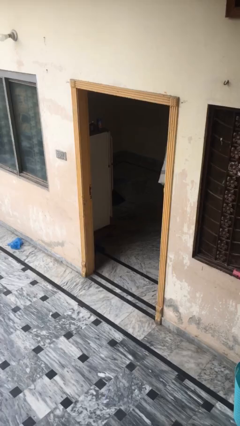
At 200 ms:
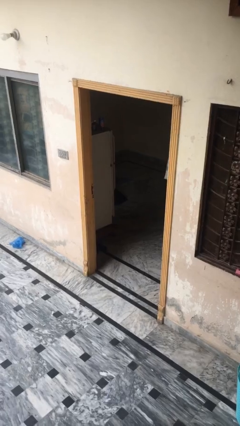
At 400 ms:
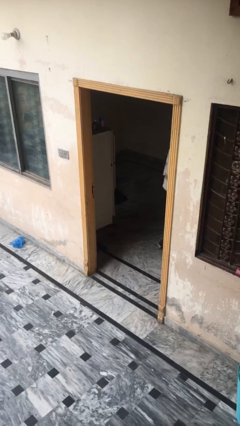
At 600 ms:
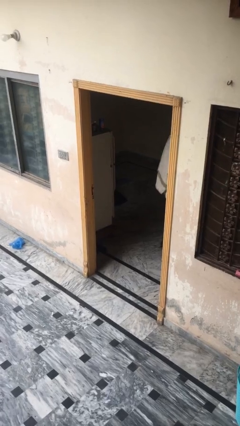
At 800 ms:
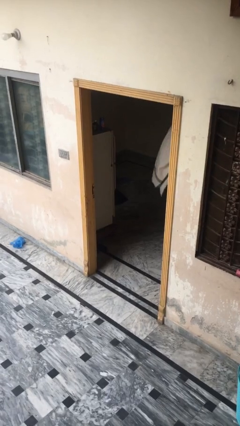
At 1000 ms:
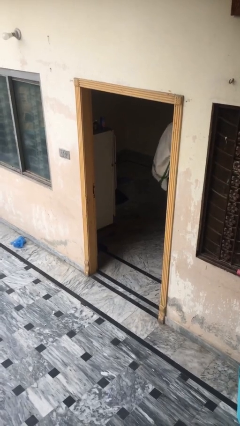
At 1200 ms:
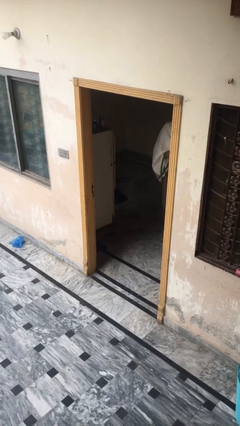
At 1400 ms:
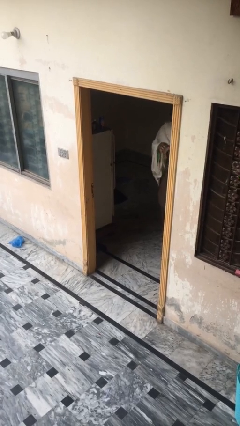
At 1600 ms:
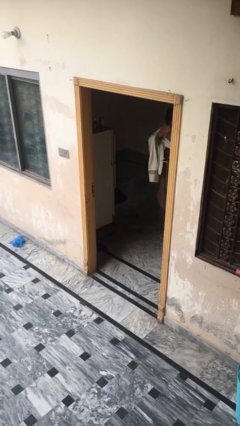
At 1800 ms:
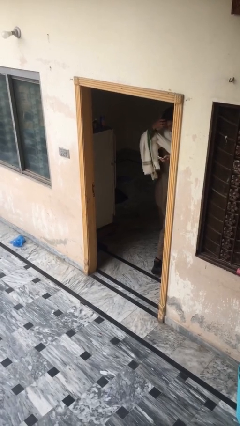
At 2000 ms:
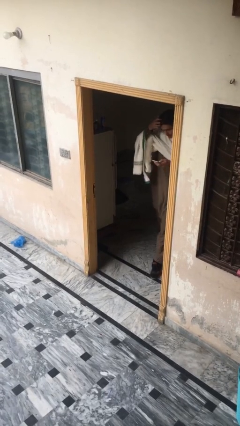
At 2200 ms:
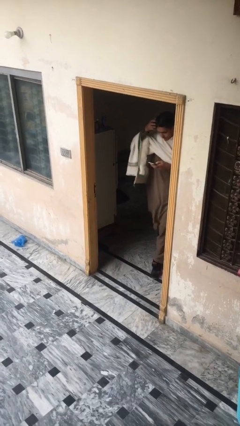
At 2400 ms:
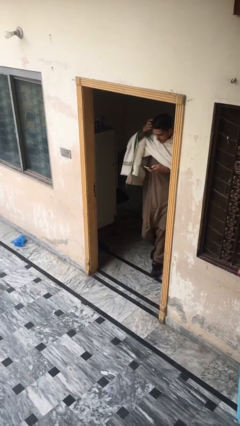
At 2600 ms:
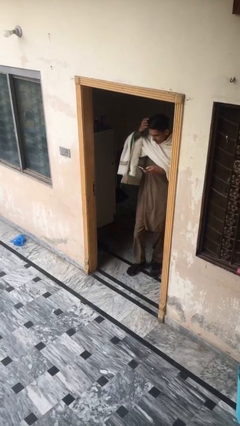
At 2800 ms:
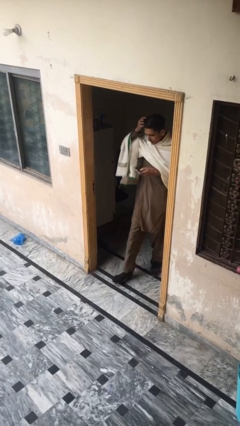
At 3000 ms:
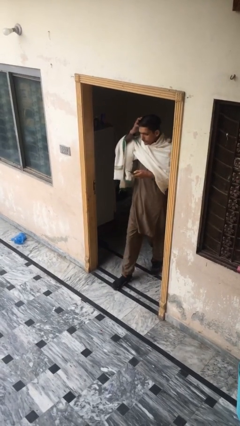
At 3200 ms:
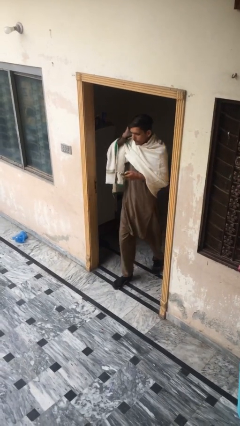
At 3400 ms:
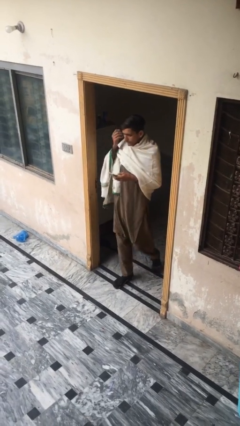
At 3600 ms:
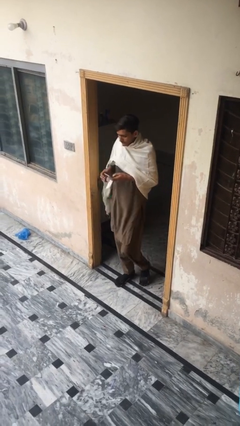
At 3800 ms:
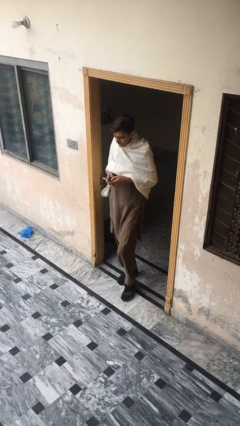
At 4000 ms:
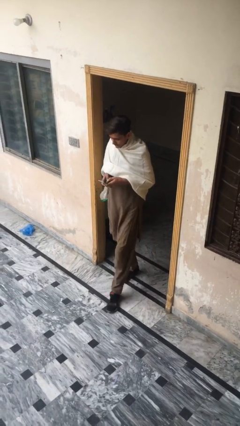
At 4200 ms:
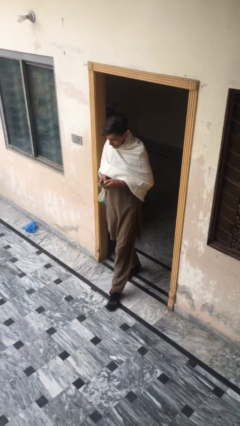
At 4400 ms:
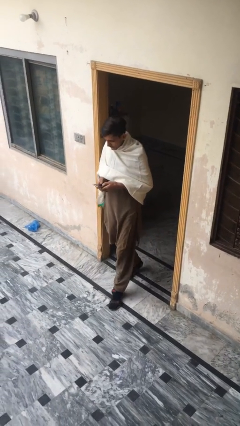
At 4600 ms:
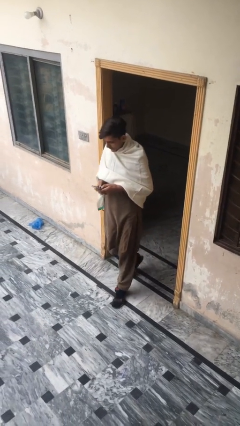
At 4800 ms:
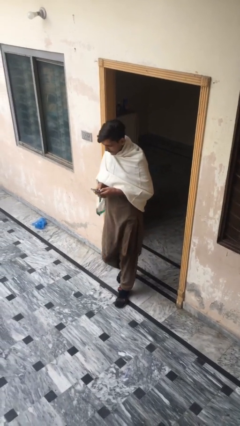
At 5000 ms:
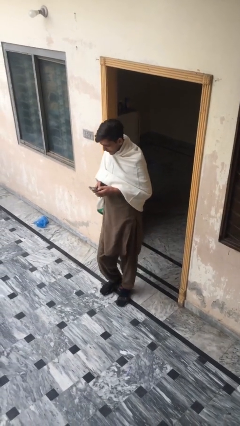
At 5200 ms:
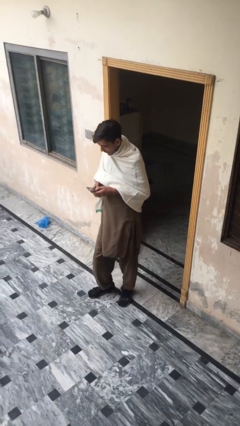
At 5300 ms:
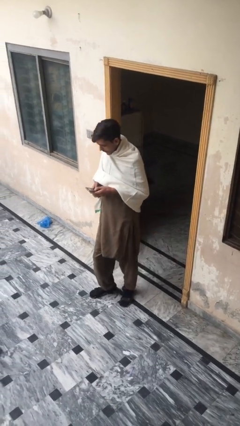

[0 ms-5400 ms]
person enters scene through structure

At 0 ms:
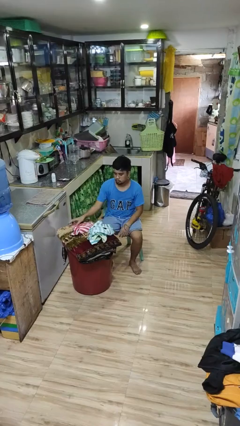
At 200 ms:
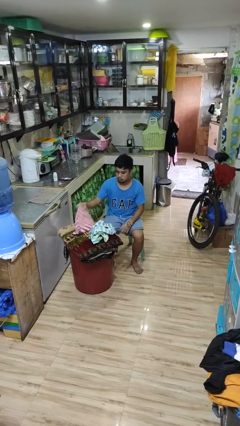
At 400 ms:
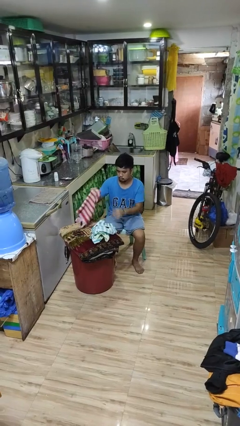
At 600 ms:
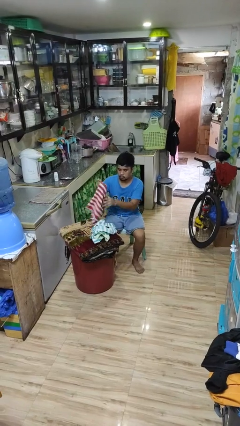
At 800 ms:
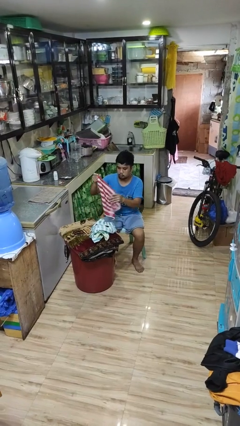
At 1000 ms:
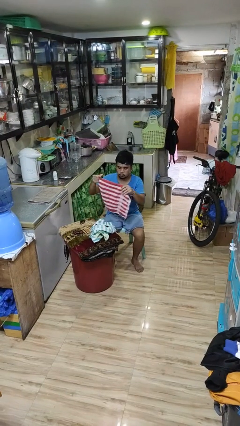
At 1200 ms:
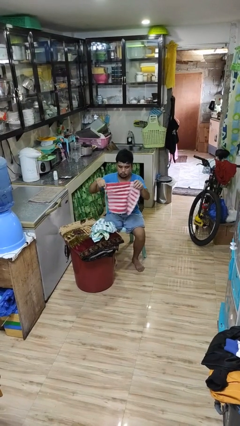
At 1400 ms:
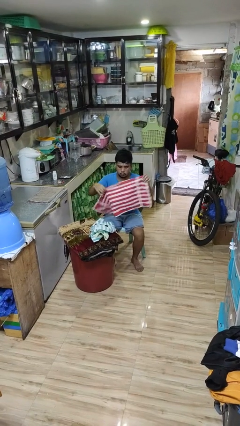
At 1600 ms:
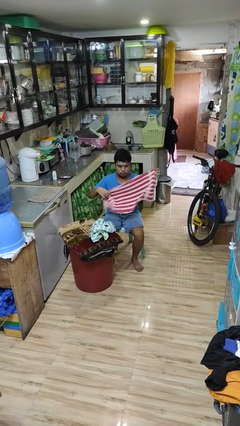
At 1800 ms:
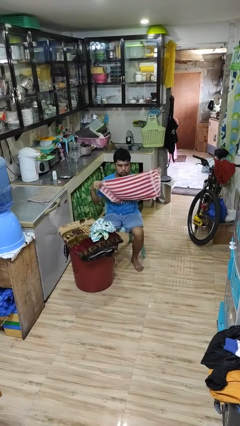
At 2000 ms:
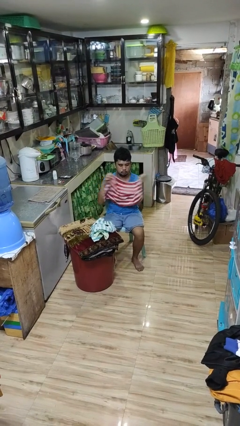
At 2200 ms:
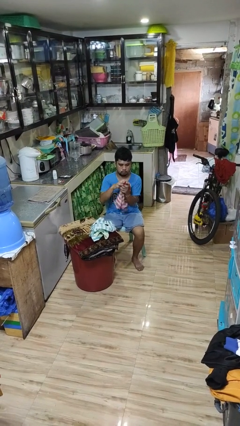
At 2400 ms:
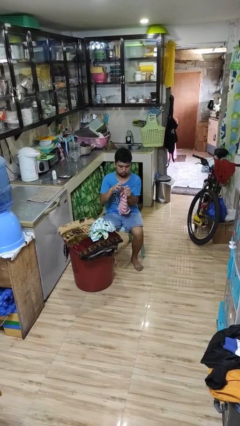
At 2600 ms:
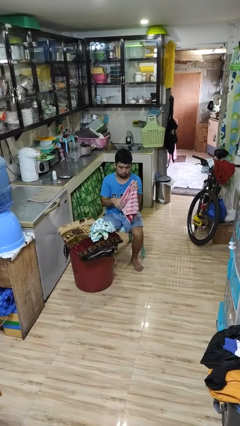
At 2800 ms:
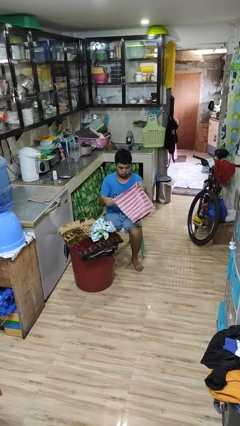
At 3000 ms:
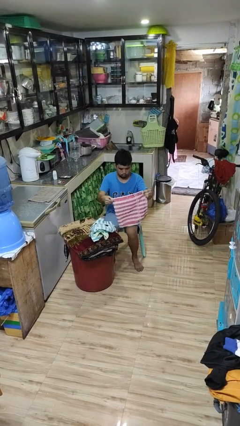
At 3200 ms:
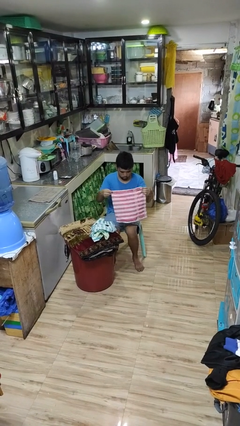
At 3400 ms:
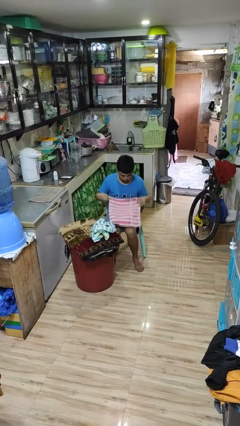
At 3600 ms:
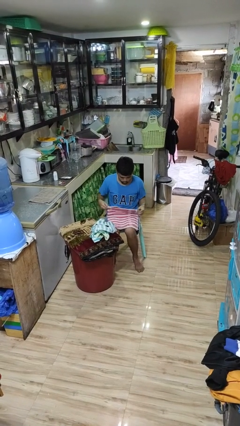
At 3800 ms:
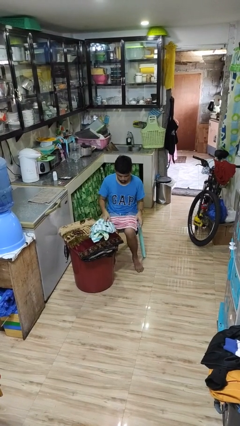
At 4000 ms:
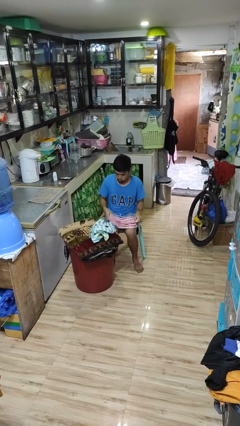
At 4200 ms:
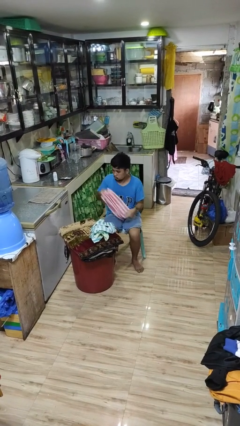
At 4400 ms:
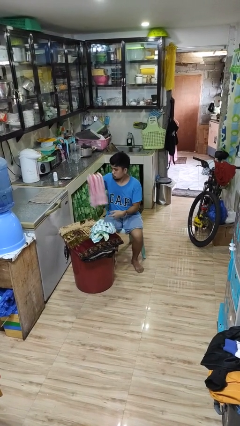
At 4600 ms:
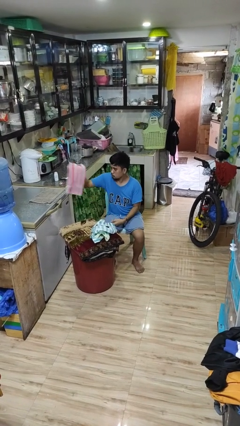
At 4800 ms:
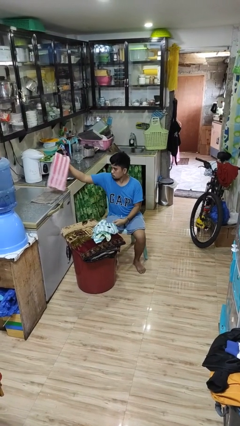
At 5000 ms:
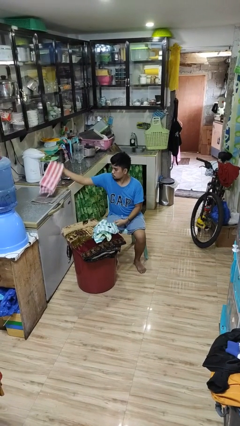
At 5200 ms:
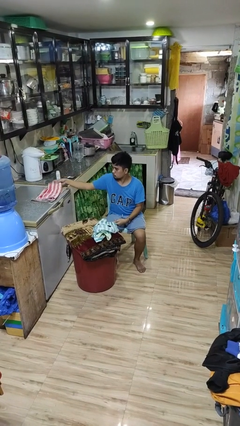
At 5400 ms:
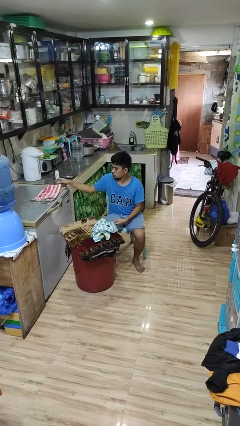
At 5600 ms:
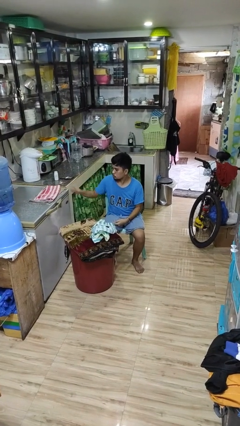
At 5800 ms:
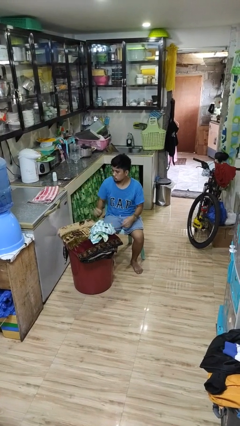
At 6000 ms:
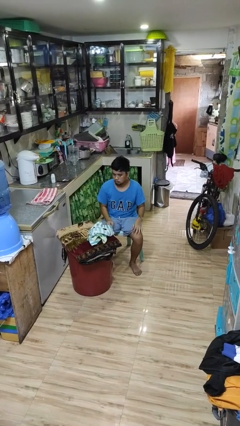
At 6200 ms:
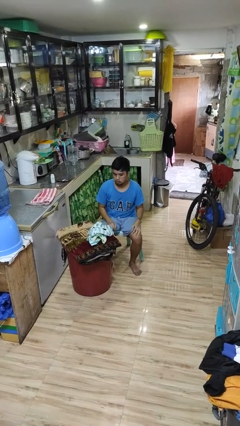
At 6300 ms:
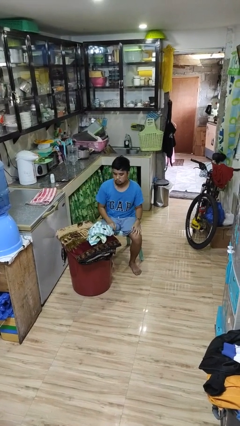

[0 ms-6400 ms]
person folds towel

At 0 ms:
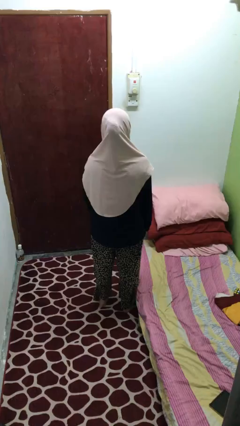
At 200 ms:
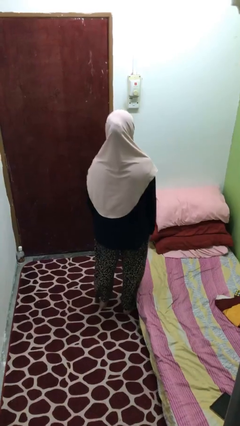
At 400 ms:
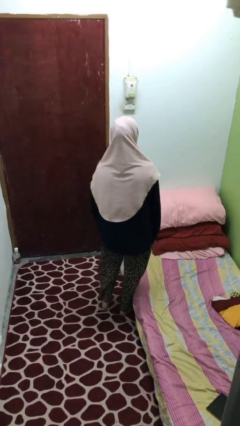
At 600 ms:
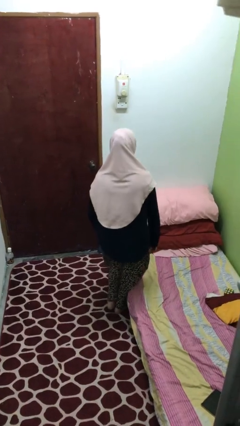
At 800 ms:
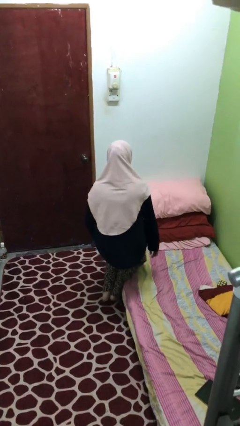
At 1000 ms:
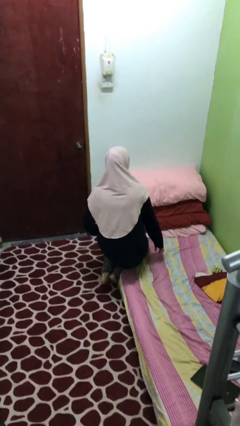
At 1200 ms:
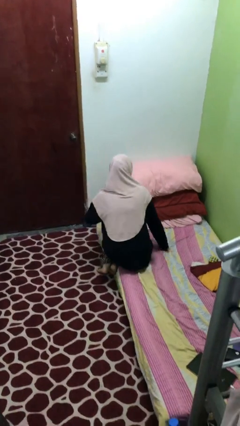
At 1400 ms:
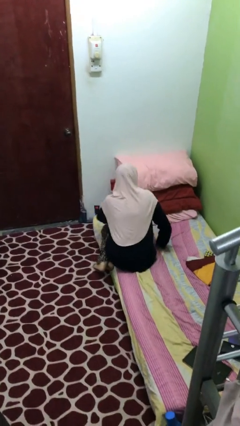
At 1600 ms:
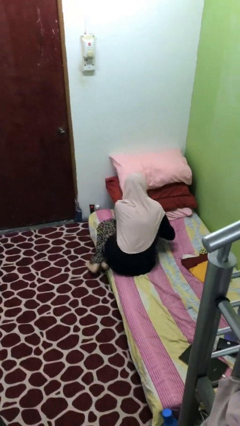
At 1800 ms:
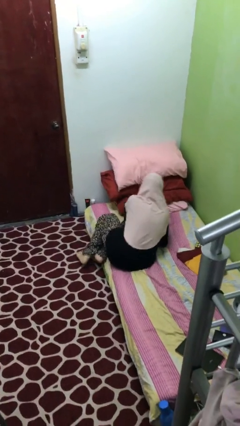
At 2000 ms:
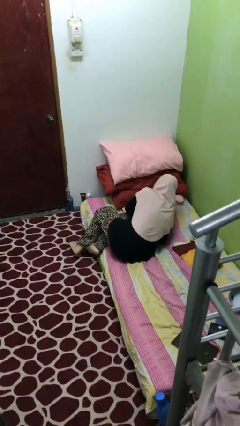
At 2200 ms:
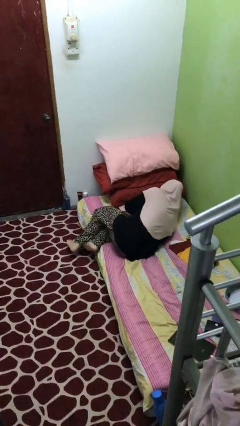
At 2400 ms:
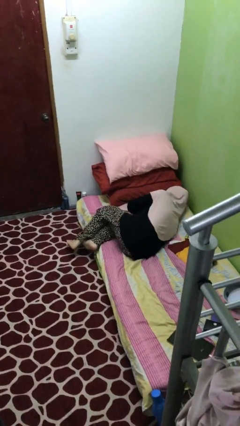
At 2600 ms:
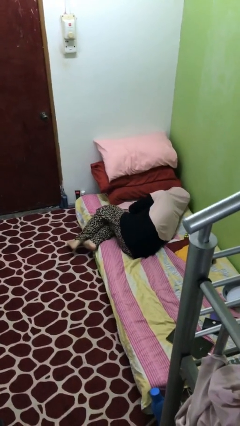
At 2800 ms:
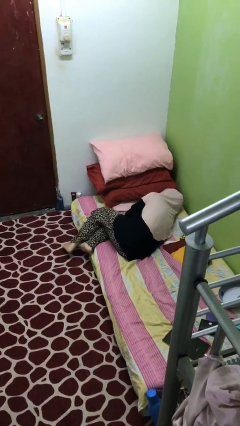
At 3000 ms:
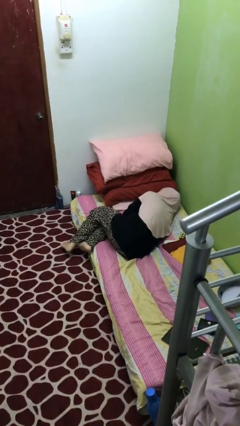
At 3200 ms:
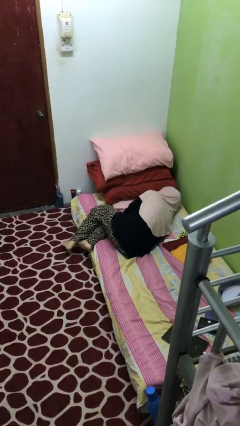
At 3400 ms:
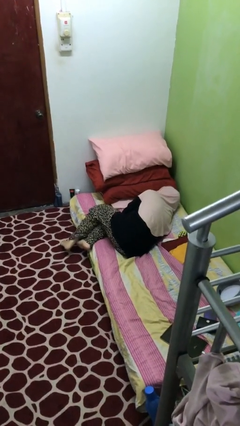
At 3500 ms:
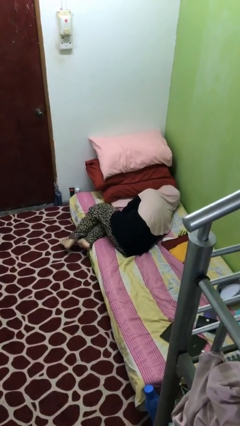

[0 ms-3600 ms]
person lies down on bed

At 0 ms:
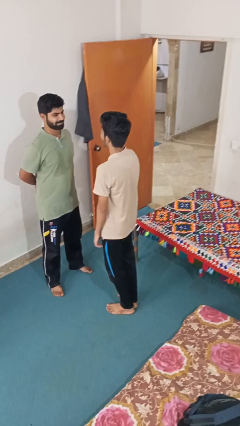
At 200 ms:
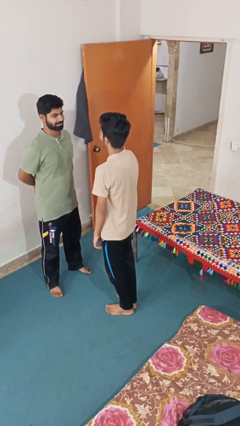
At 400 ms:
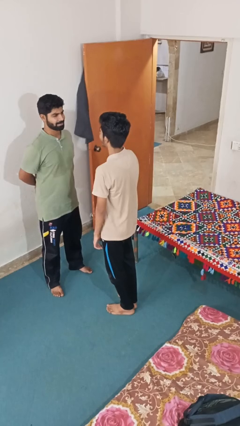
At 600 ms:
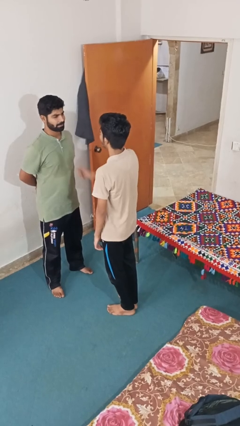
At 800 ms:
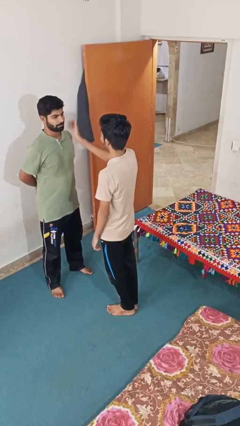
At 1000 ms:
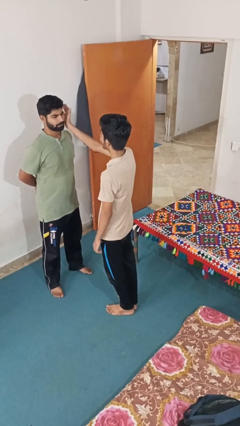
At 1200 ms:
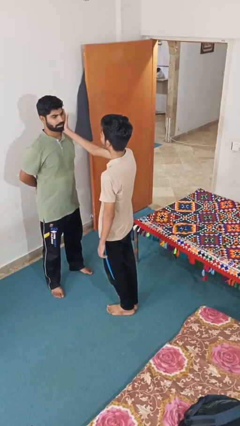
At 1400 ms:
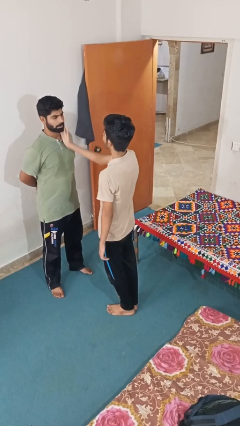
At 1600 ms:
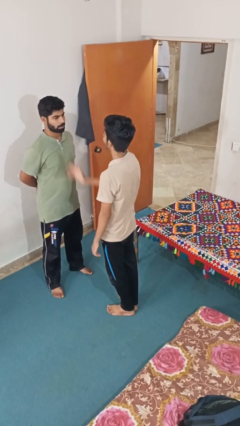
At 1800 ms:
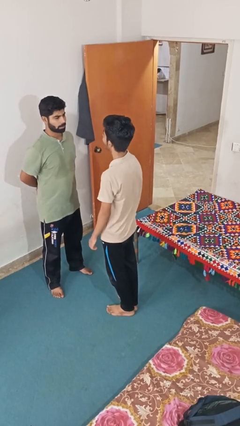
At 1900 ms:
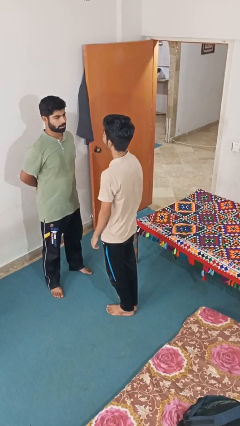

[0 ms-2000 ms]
person touches face of person
